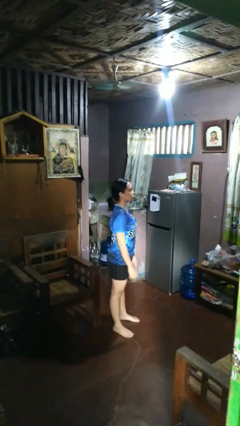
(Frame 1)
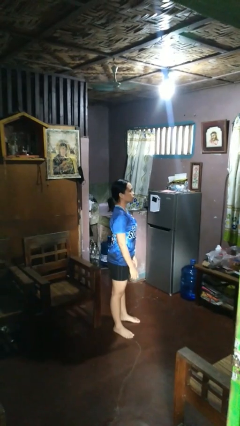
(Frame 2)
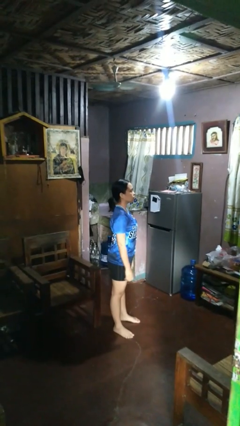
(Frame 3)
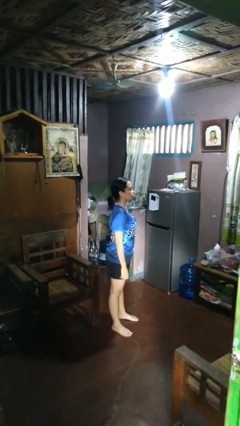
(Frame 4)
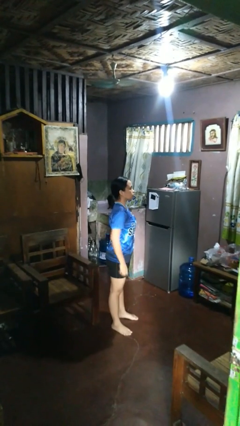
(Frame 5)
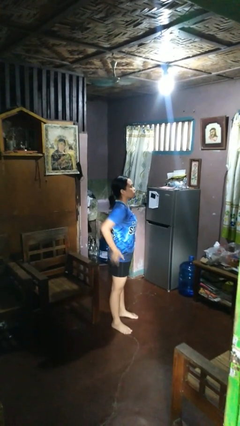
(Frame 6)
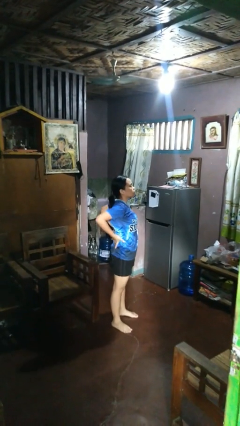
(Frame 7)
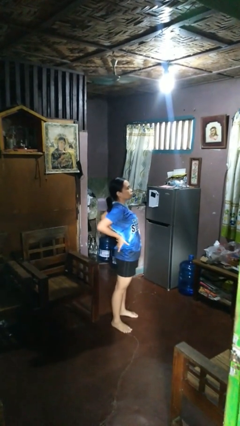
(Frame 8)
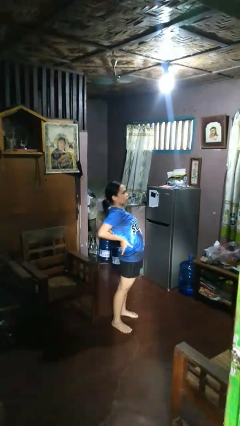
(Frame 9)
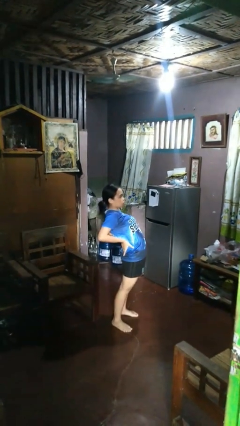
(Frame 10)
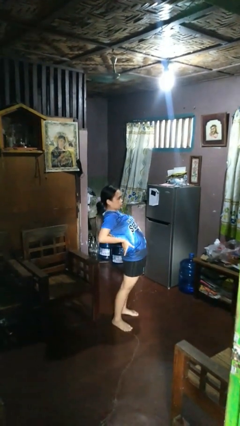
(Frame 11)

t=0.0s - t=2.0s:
person stretches back

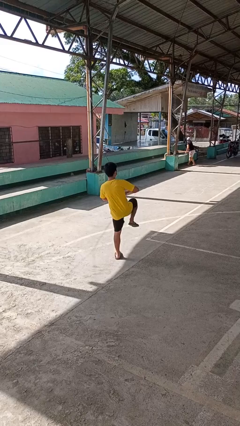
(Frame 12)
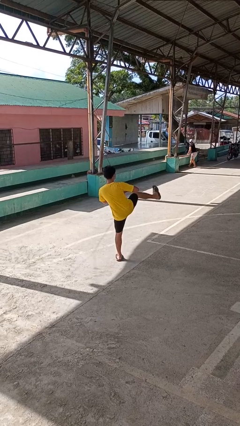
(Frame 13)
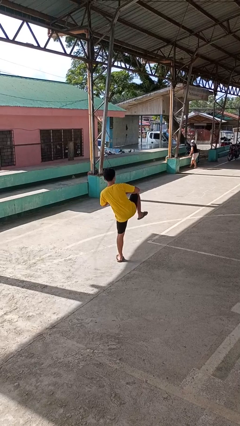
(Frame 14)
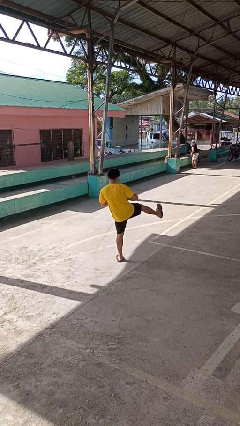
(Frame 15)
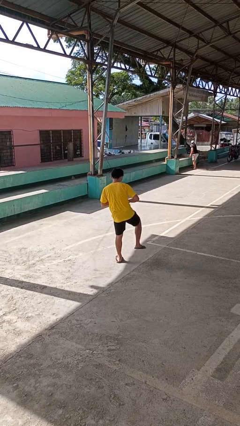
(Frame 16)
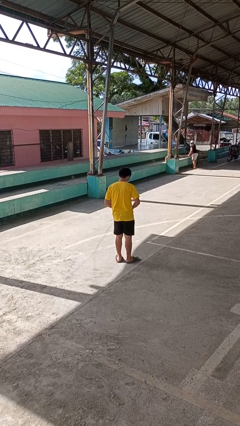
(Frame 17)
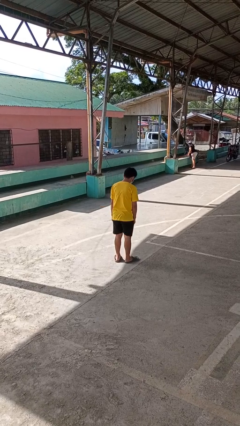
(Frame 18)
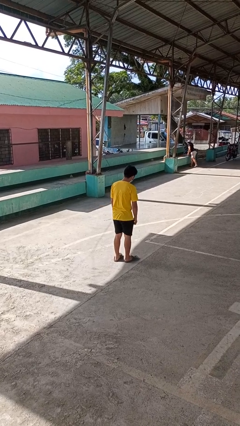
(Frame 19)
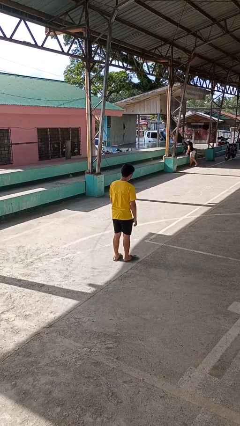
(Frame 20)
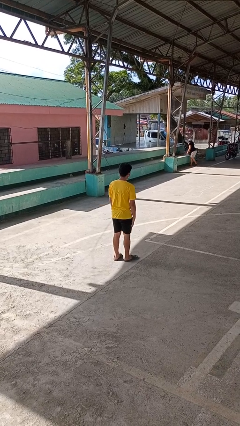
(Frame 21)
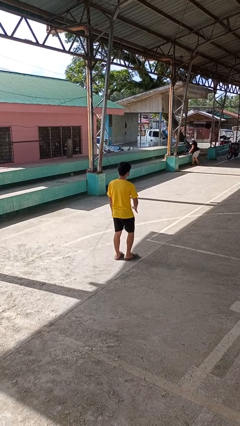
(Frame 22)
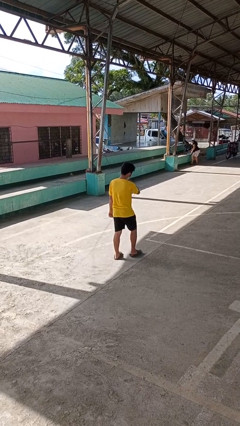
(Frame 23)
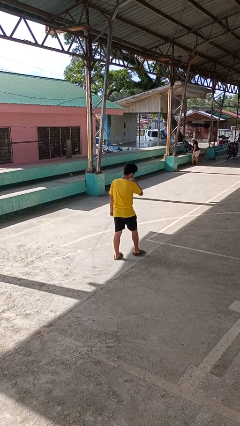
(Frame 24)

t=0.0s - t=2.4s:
person karate kicks

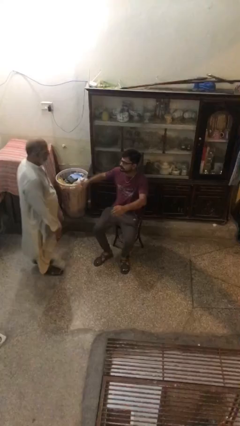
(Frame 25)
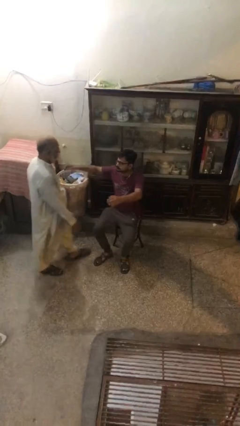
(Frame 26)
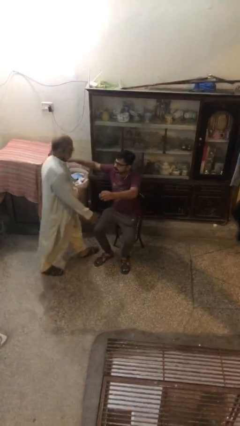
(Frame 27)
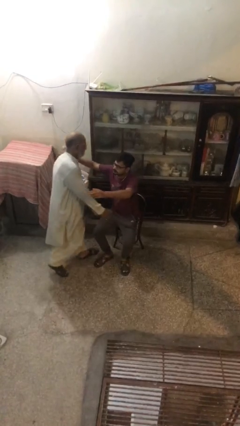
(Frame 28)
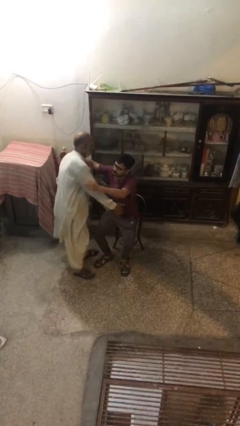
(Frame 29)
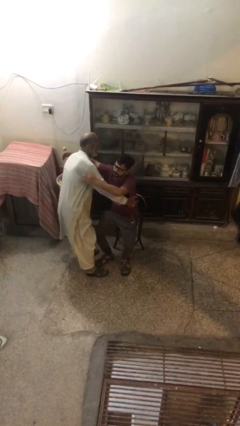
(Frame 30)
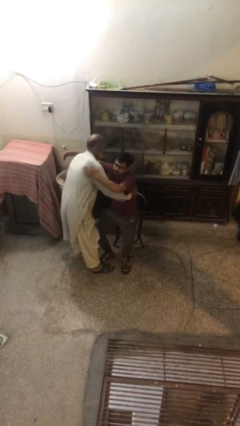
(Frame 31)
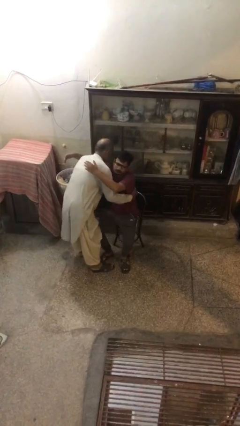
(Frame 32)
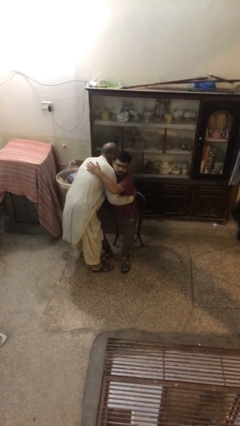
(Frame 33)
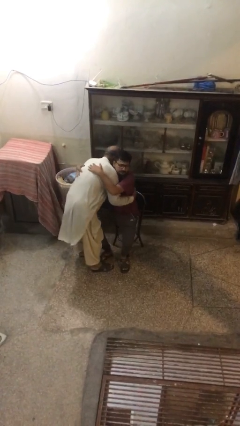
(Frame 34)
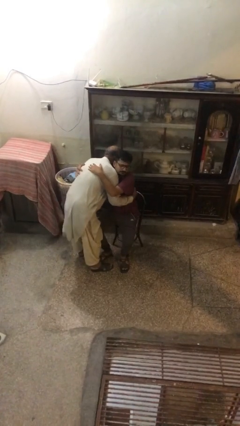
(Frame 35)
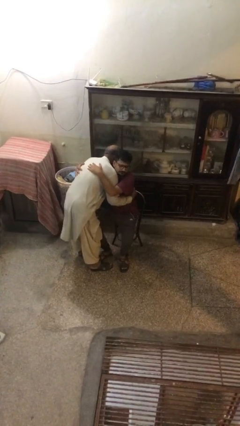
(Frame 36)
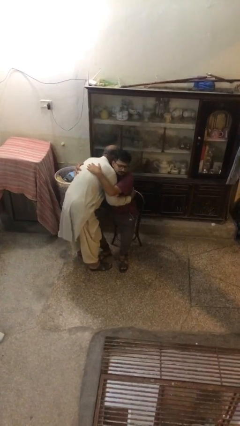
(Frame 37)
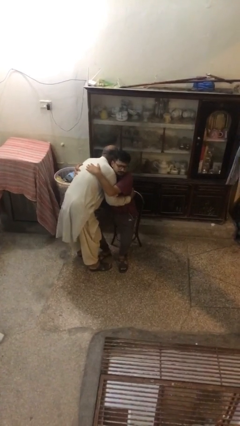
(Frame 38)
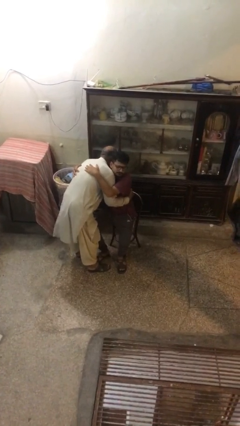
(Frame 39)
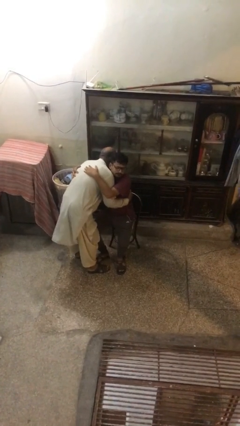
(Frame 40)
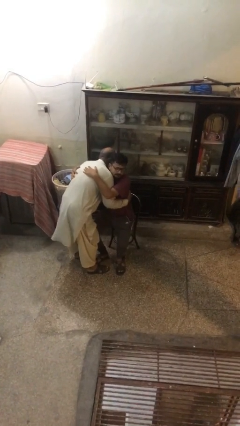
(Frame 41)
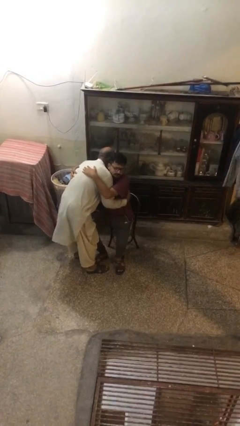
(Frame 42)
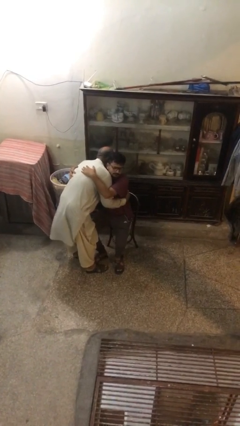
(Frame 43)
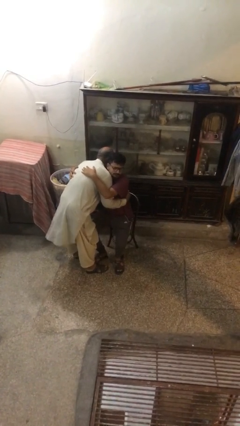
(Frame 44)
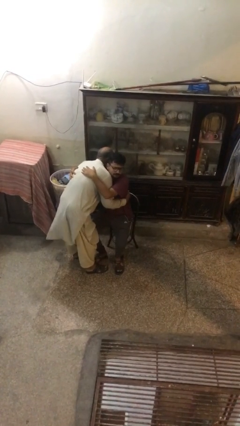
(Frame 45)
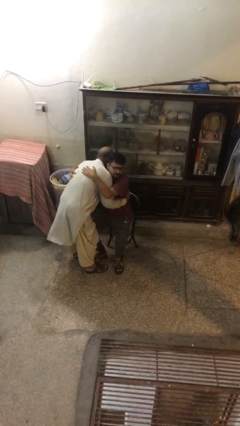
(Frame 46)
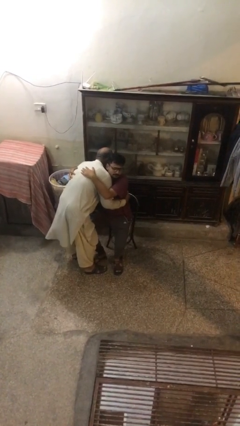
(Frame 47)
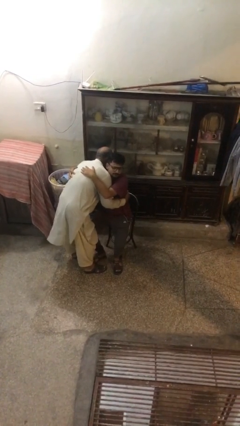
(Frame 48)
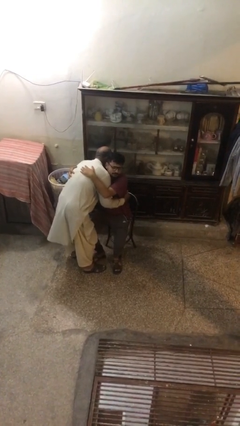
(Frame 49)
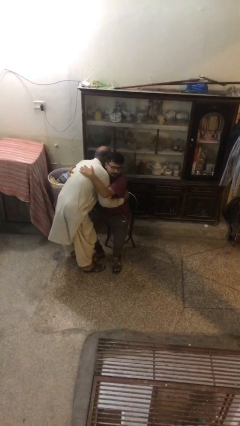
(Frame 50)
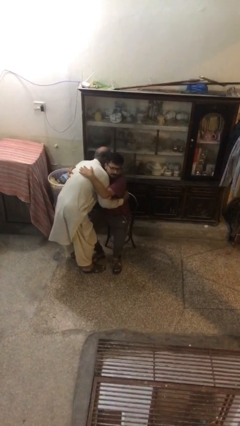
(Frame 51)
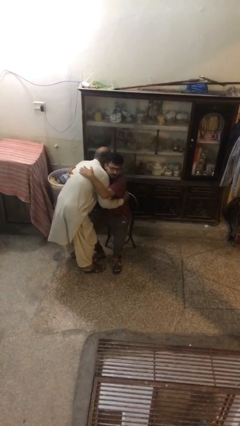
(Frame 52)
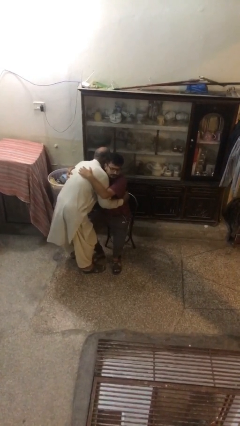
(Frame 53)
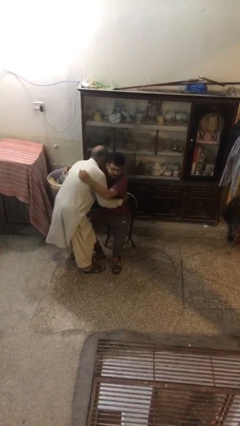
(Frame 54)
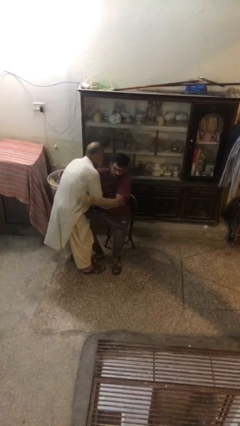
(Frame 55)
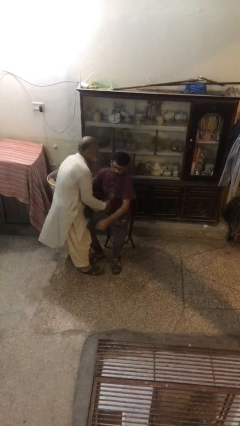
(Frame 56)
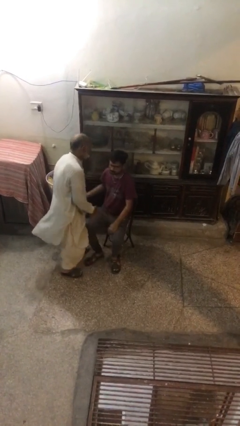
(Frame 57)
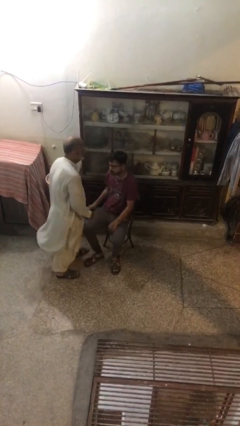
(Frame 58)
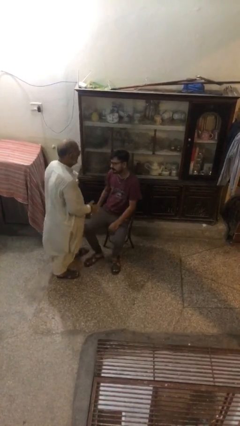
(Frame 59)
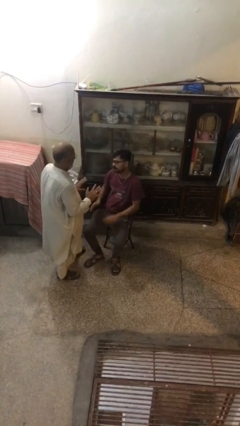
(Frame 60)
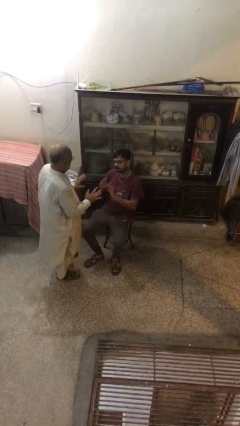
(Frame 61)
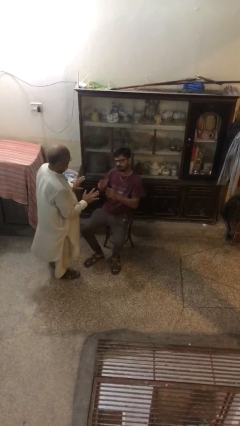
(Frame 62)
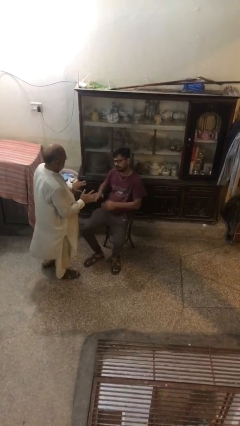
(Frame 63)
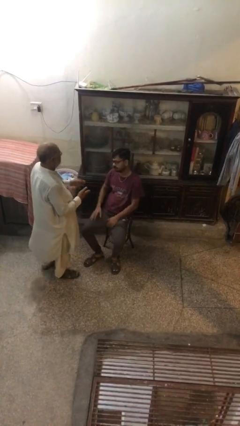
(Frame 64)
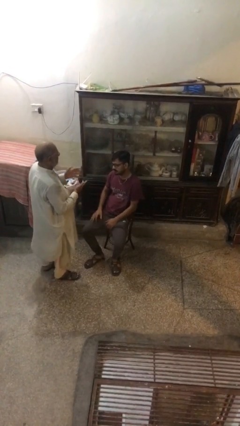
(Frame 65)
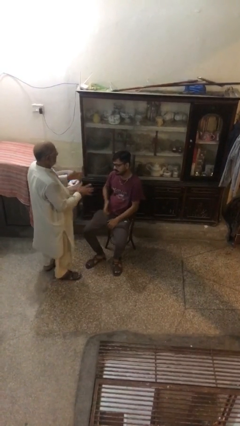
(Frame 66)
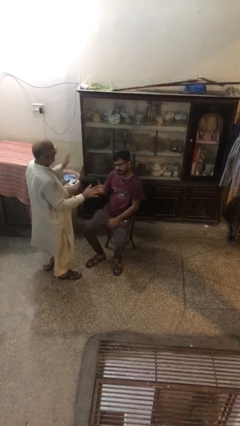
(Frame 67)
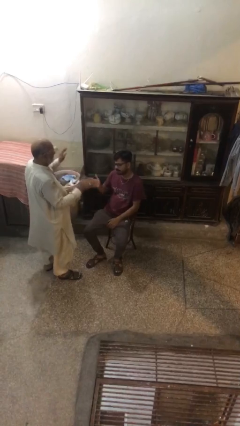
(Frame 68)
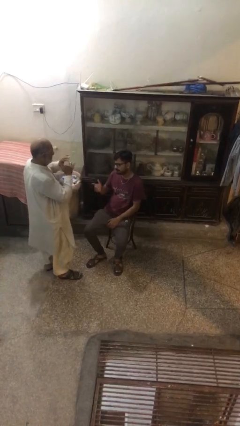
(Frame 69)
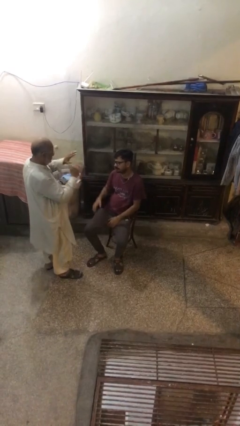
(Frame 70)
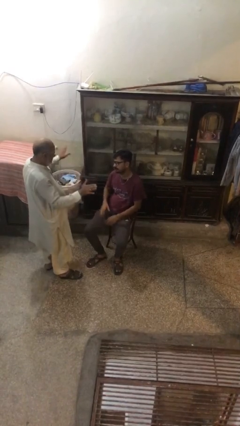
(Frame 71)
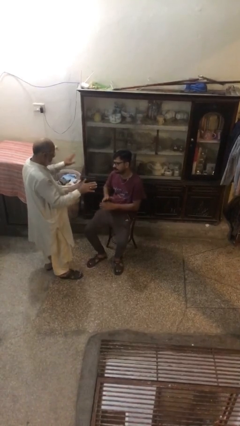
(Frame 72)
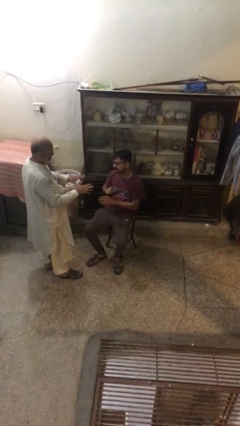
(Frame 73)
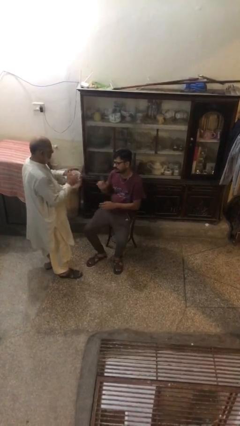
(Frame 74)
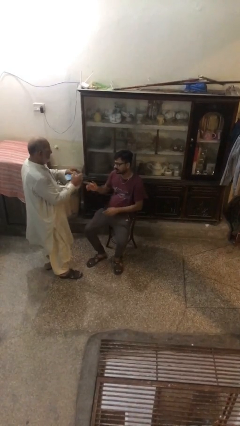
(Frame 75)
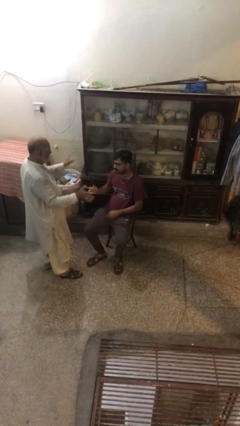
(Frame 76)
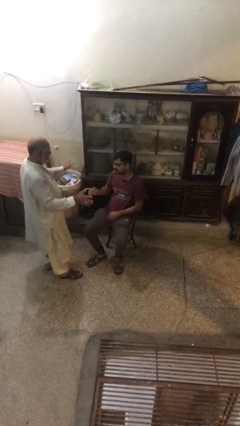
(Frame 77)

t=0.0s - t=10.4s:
person embraces person

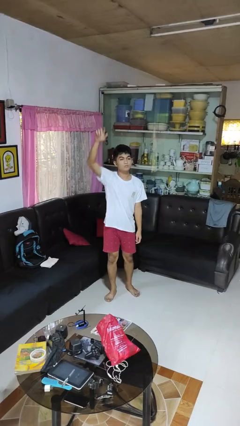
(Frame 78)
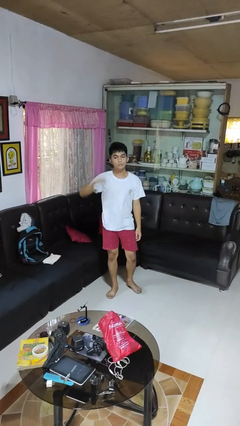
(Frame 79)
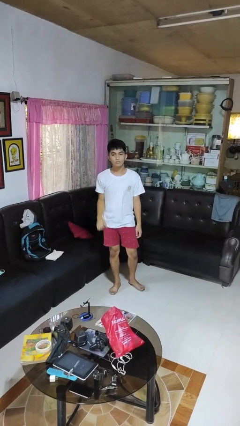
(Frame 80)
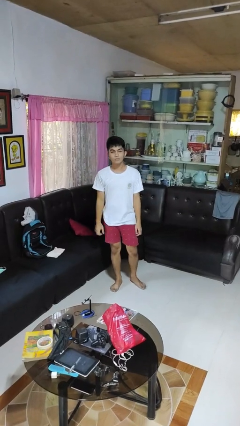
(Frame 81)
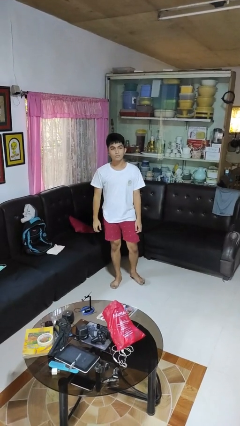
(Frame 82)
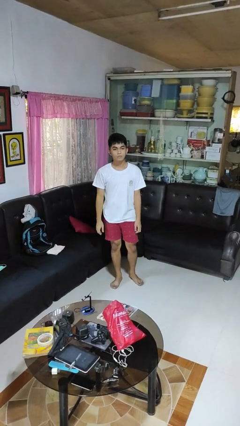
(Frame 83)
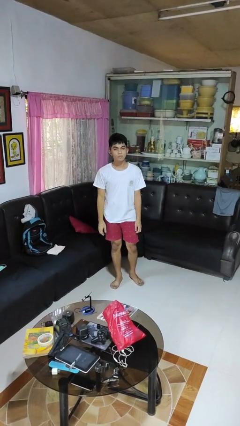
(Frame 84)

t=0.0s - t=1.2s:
person gestures lower hand

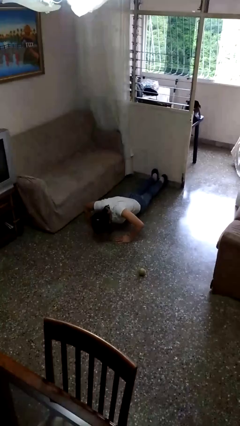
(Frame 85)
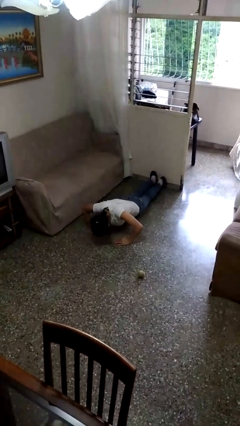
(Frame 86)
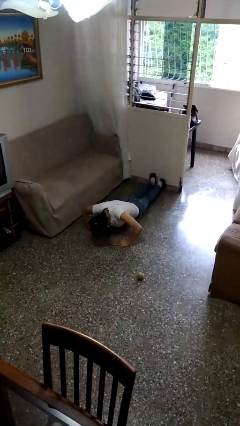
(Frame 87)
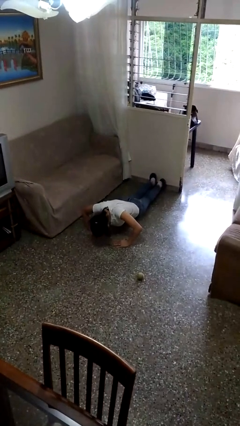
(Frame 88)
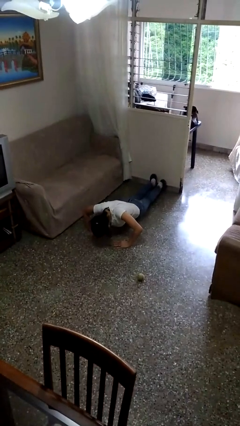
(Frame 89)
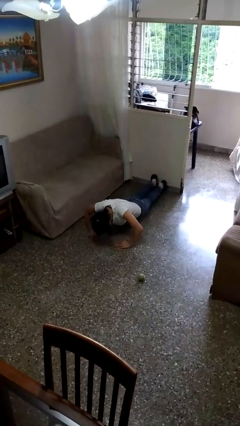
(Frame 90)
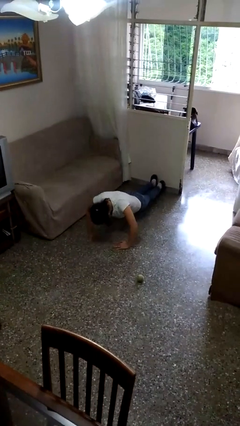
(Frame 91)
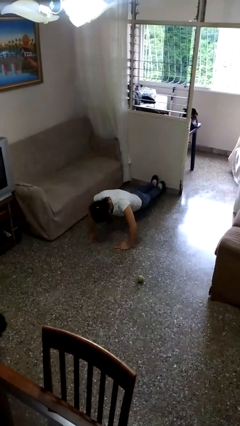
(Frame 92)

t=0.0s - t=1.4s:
person exercises with pushup

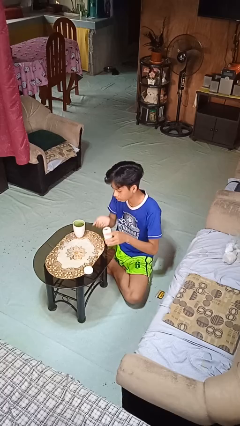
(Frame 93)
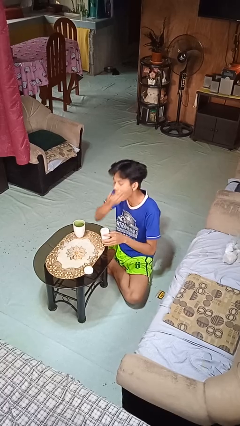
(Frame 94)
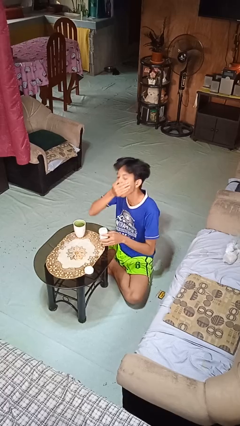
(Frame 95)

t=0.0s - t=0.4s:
person takes medicine pills
